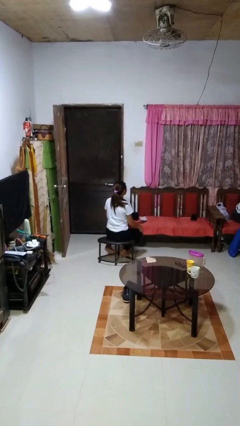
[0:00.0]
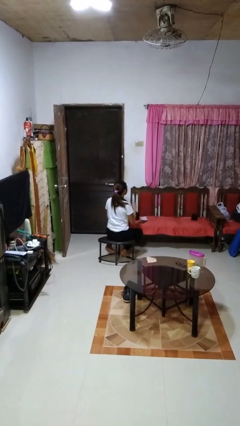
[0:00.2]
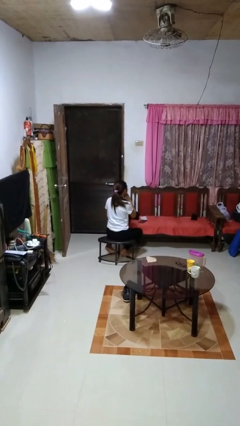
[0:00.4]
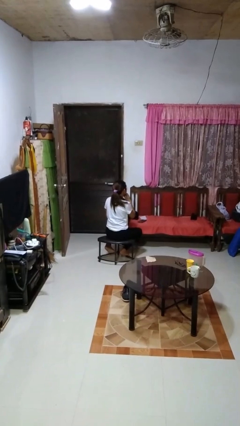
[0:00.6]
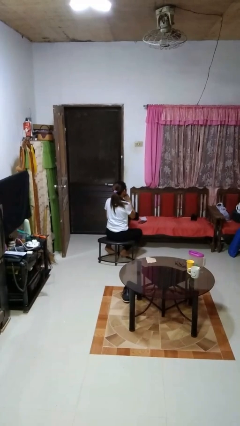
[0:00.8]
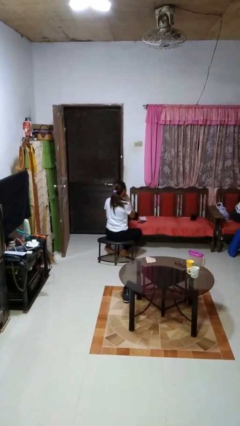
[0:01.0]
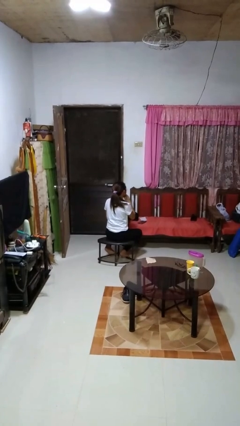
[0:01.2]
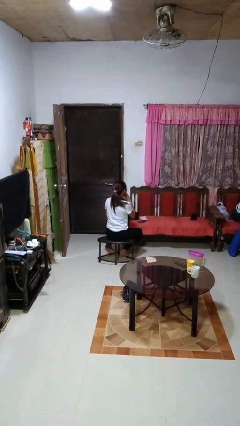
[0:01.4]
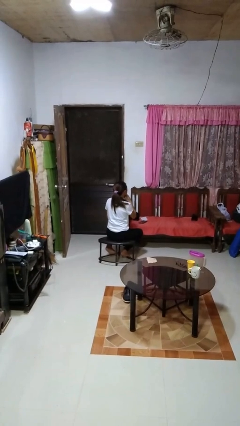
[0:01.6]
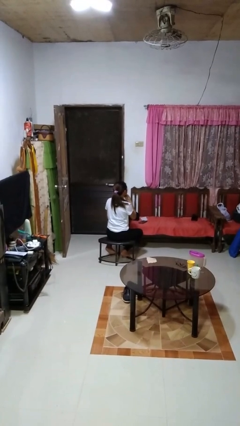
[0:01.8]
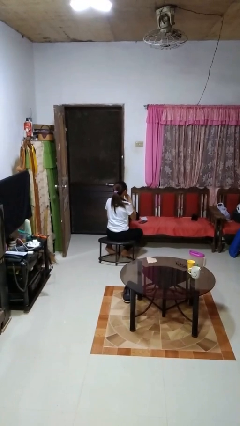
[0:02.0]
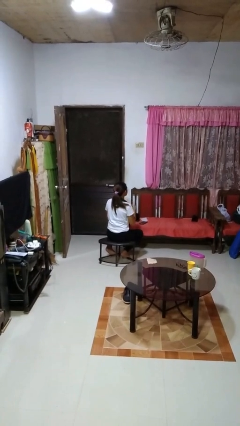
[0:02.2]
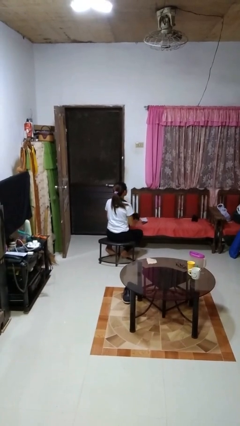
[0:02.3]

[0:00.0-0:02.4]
person strokes chin

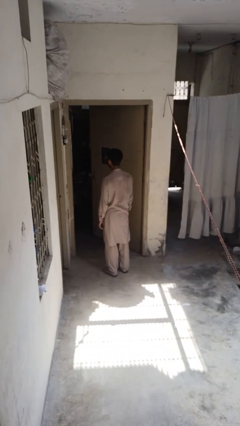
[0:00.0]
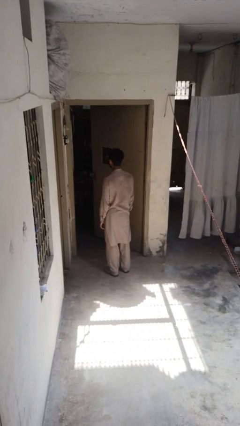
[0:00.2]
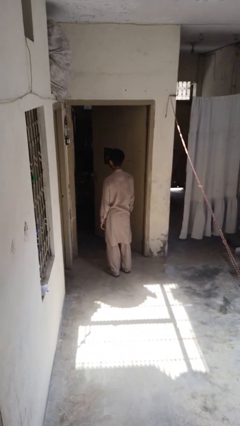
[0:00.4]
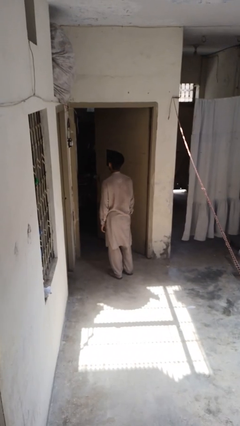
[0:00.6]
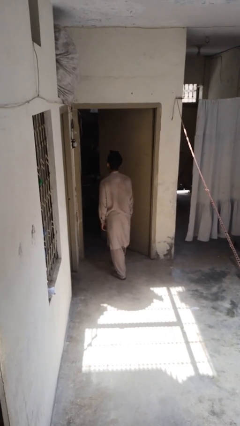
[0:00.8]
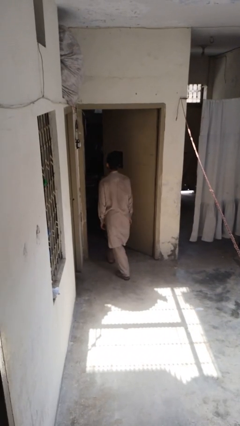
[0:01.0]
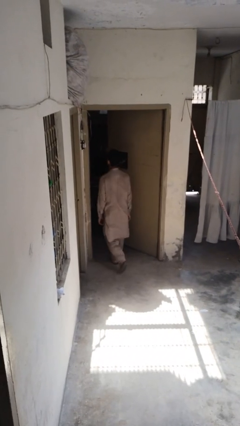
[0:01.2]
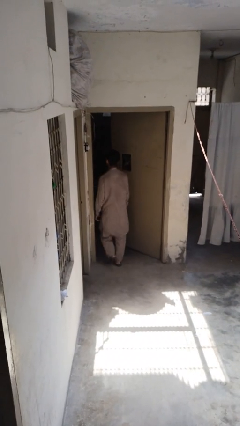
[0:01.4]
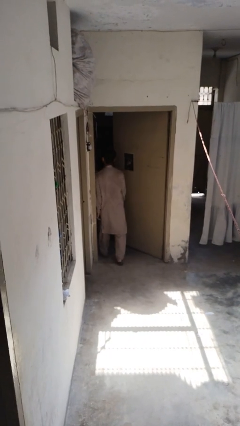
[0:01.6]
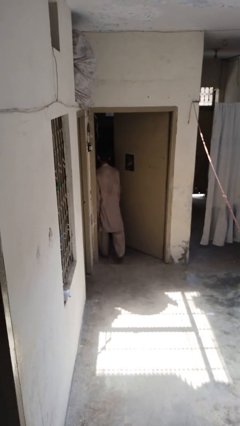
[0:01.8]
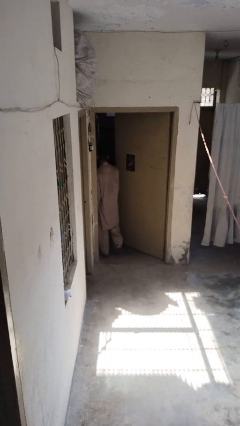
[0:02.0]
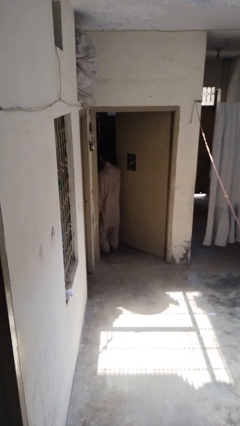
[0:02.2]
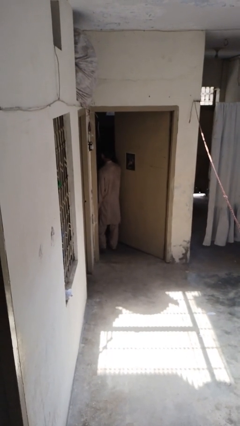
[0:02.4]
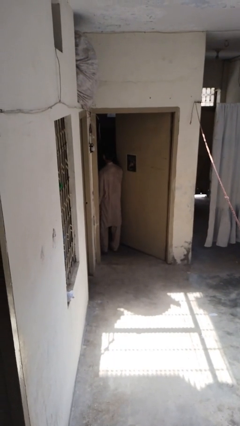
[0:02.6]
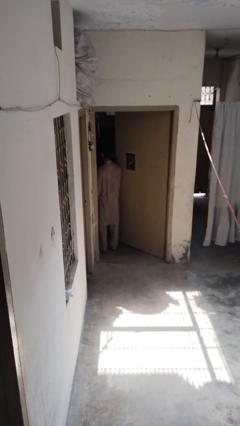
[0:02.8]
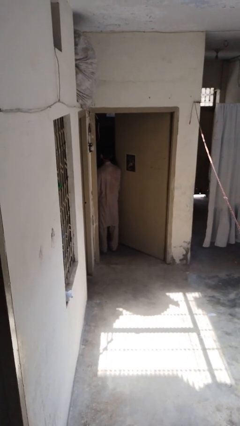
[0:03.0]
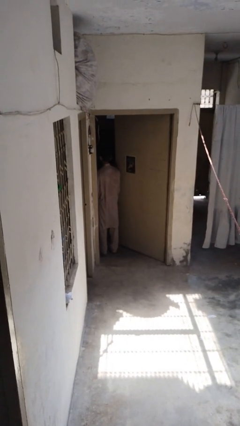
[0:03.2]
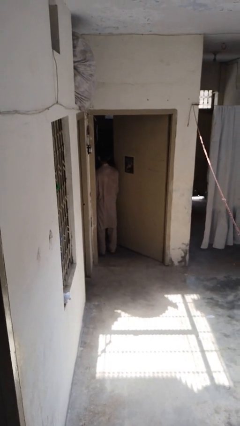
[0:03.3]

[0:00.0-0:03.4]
person bumps into wall

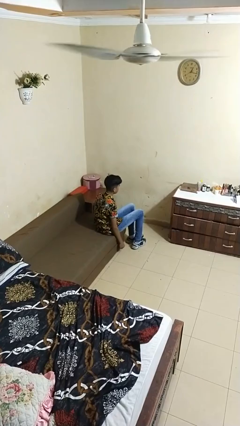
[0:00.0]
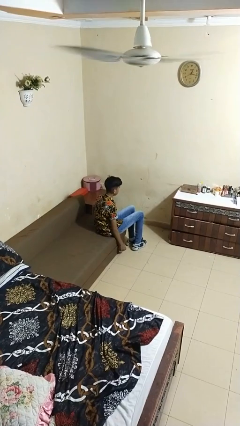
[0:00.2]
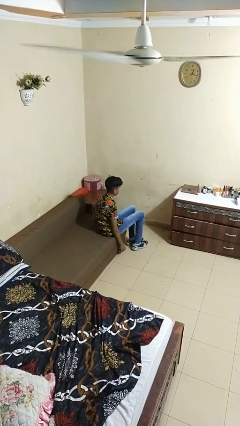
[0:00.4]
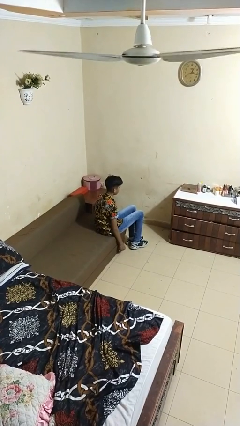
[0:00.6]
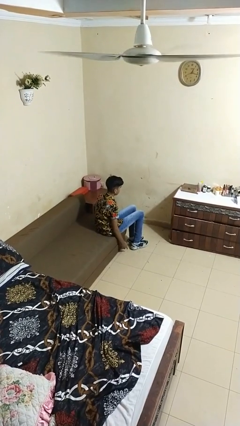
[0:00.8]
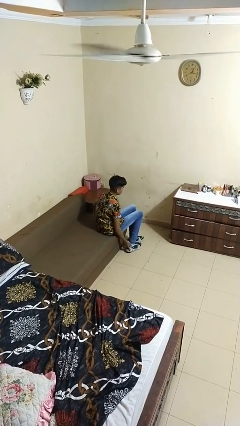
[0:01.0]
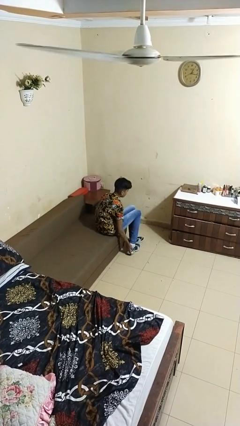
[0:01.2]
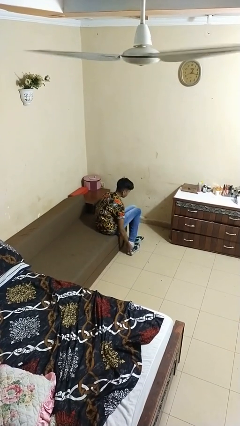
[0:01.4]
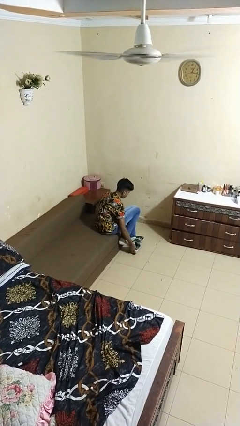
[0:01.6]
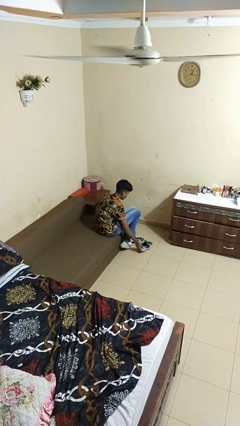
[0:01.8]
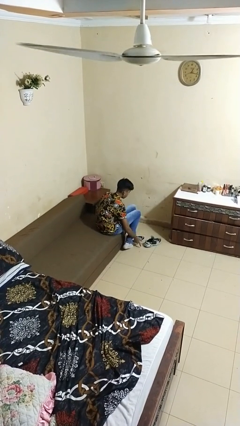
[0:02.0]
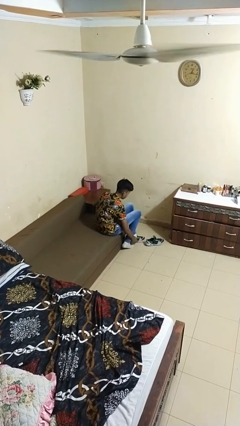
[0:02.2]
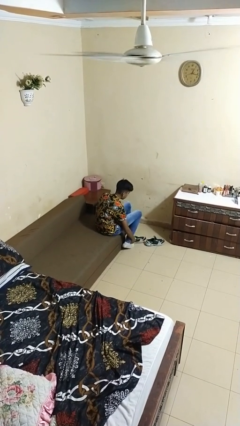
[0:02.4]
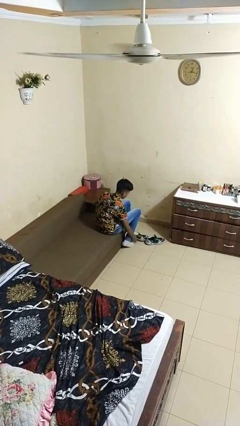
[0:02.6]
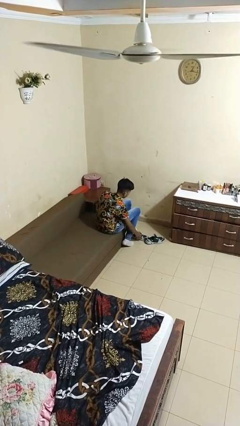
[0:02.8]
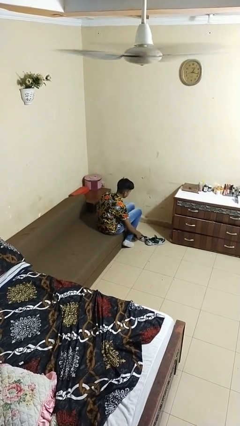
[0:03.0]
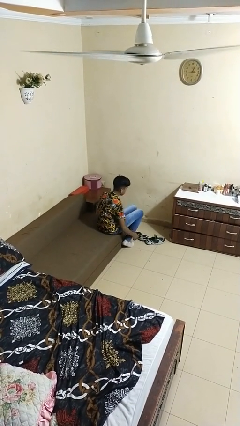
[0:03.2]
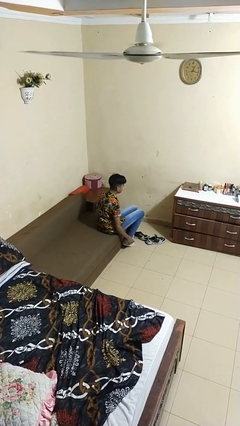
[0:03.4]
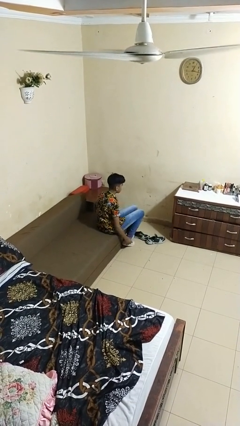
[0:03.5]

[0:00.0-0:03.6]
person takes off shoes

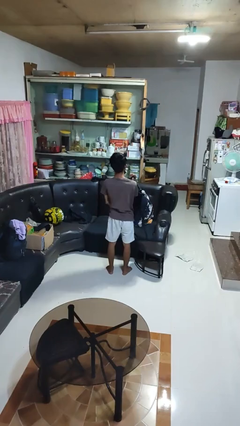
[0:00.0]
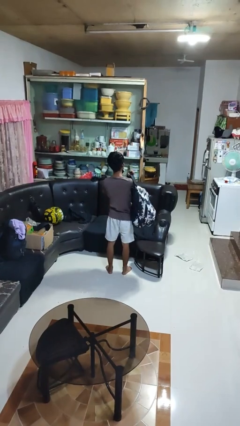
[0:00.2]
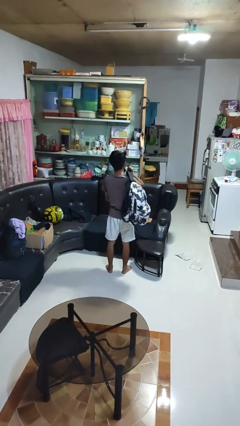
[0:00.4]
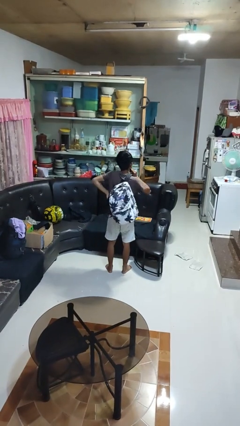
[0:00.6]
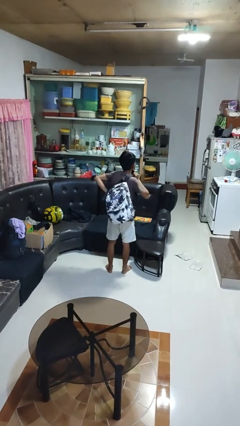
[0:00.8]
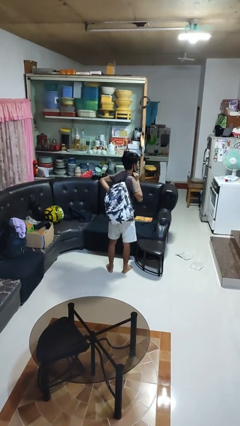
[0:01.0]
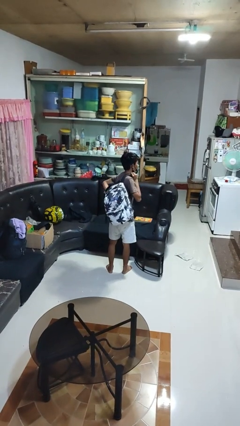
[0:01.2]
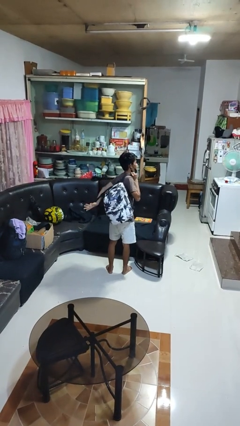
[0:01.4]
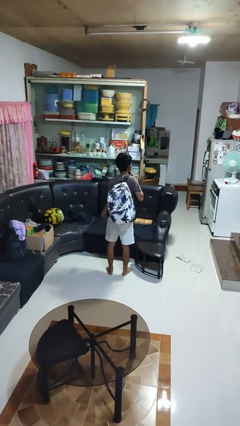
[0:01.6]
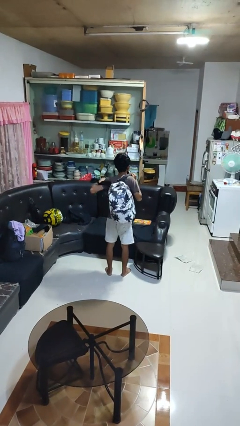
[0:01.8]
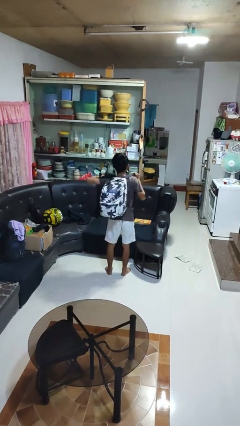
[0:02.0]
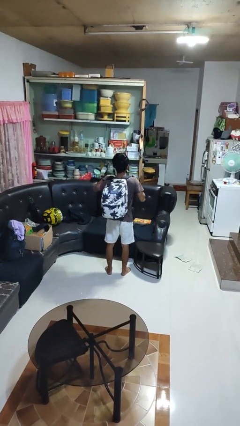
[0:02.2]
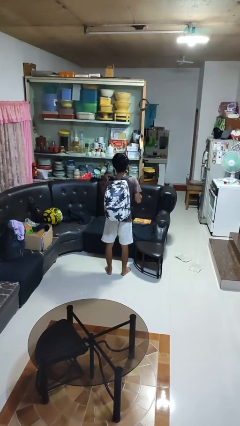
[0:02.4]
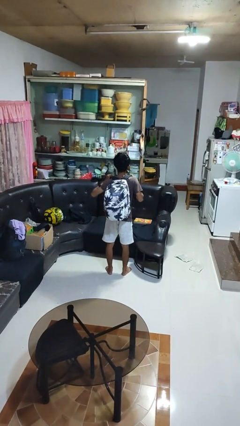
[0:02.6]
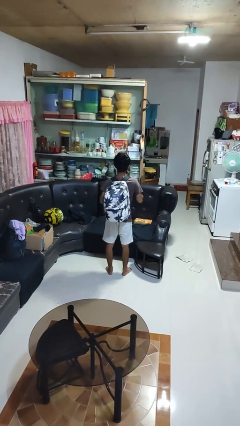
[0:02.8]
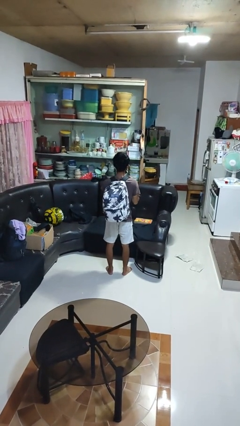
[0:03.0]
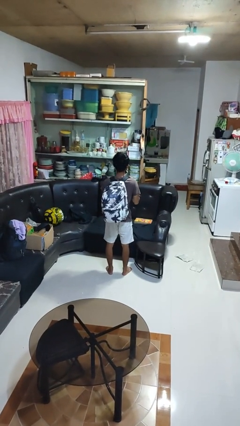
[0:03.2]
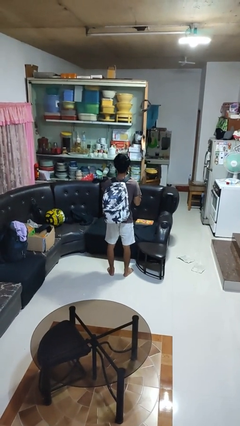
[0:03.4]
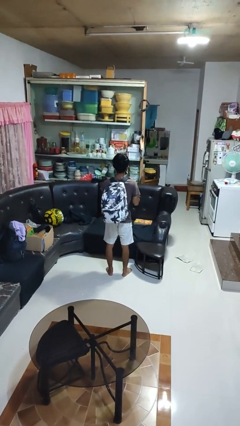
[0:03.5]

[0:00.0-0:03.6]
person puts on backpack

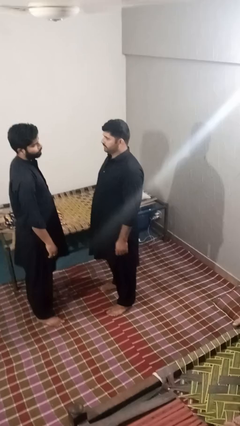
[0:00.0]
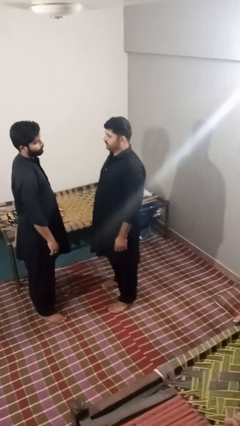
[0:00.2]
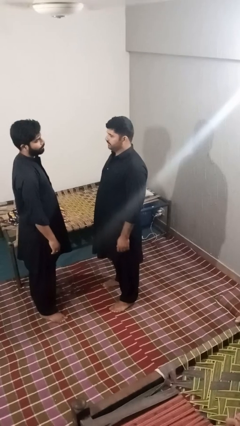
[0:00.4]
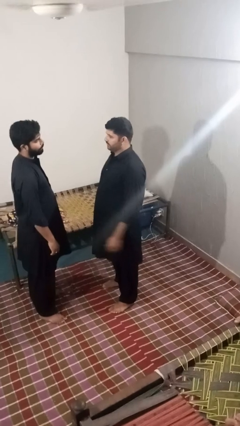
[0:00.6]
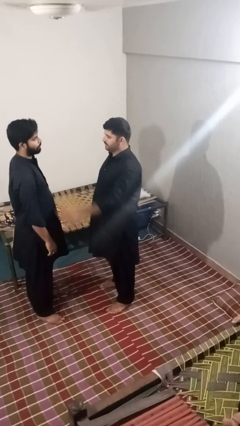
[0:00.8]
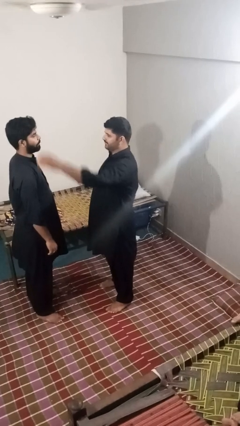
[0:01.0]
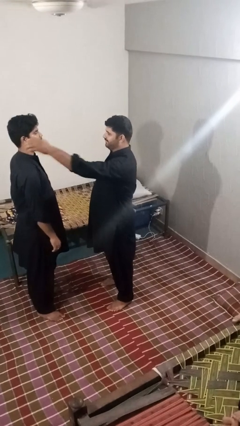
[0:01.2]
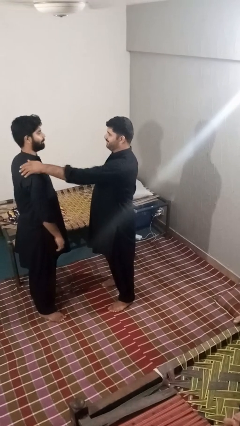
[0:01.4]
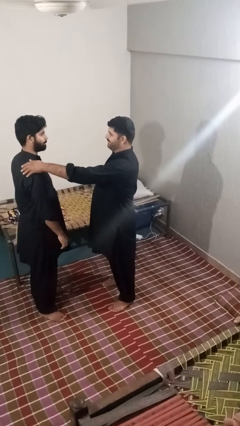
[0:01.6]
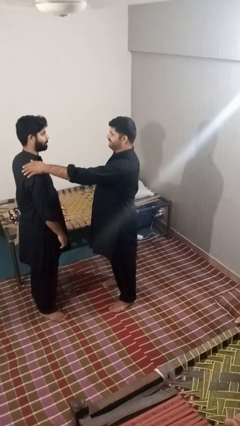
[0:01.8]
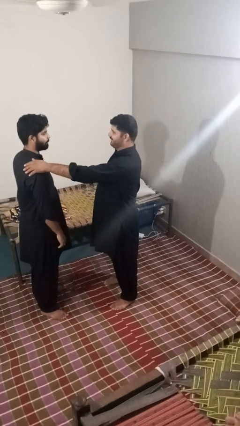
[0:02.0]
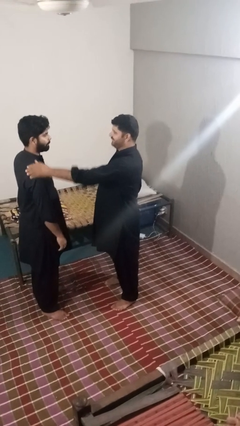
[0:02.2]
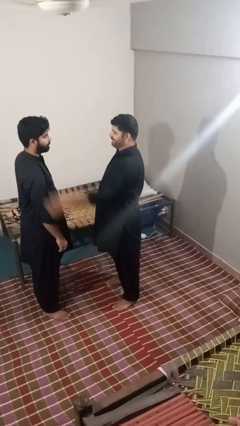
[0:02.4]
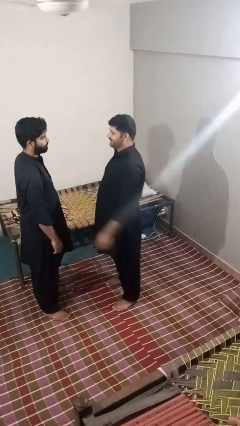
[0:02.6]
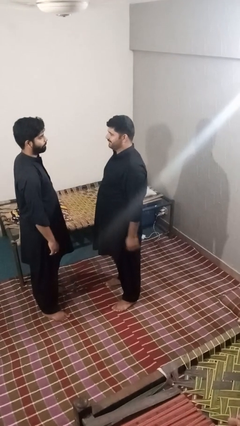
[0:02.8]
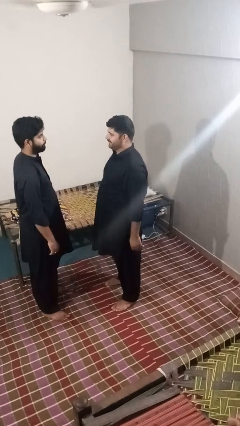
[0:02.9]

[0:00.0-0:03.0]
person pounds shoulders of person

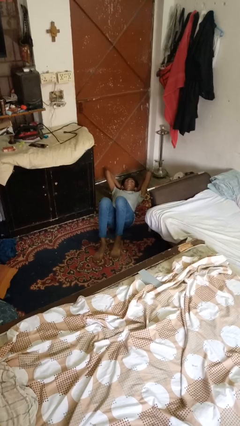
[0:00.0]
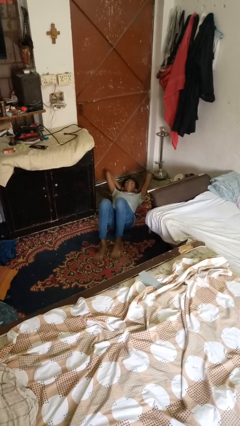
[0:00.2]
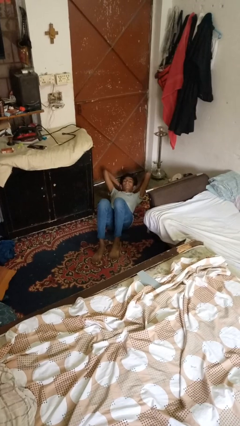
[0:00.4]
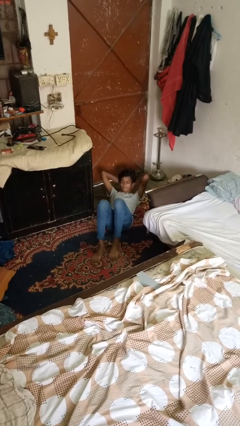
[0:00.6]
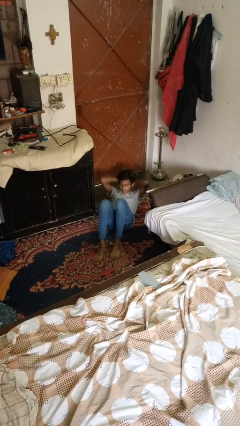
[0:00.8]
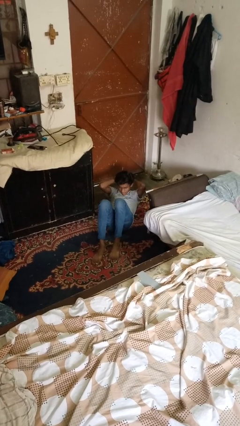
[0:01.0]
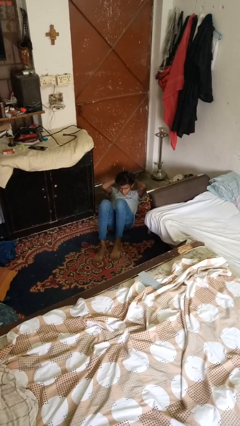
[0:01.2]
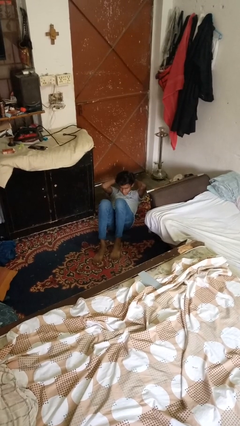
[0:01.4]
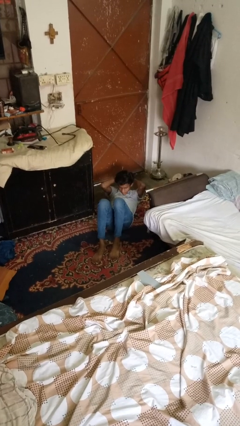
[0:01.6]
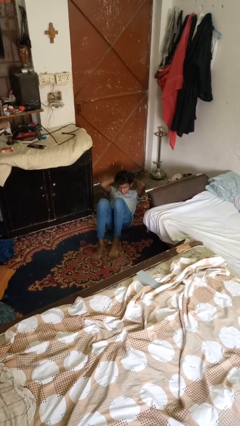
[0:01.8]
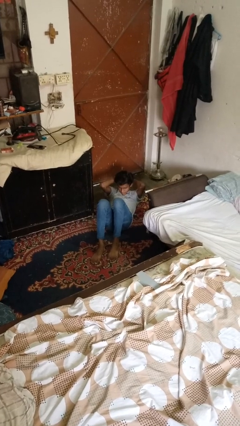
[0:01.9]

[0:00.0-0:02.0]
person exercises with situp
